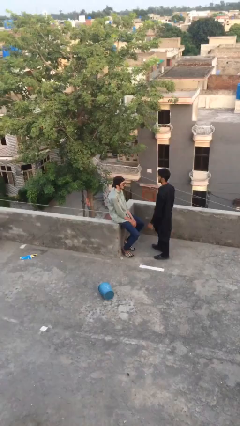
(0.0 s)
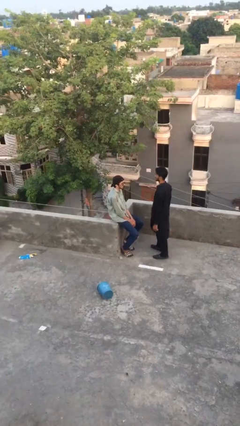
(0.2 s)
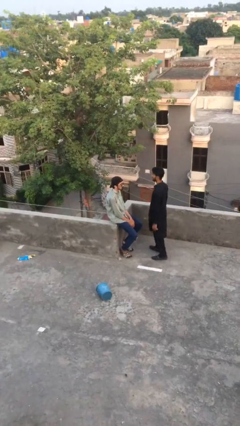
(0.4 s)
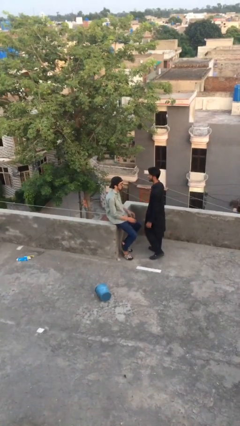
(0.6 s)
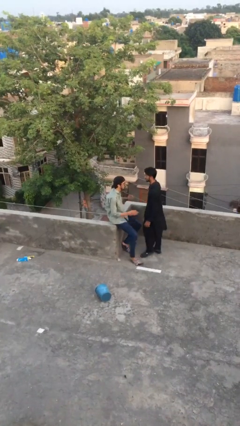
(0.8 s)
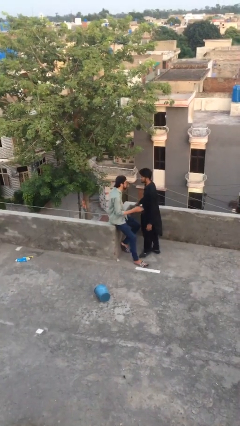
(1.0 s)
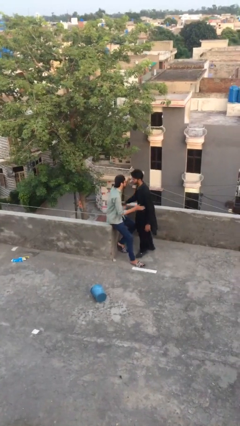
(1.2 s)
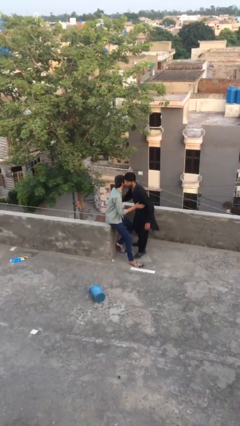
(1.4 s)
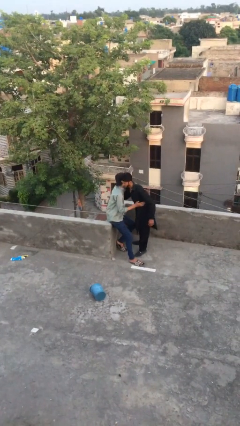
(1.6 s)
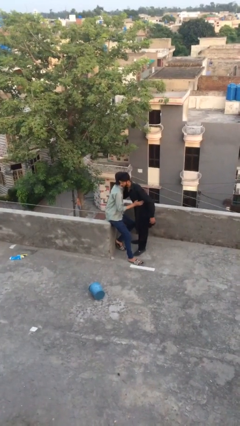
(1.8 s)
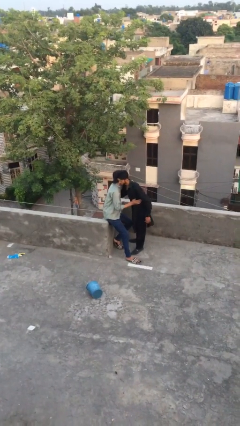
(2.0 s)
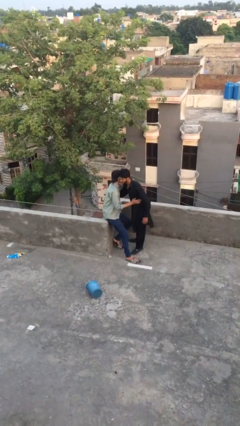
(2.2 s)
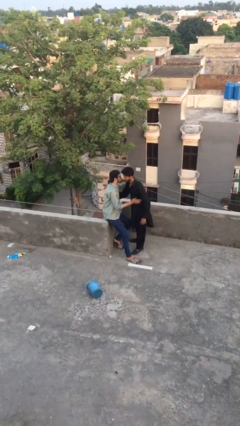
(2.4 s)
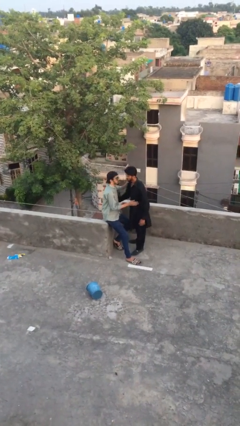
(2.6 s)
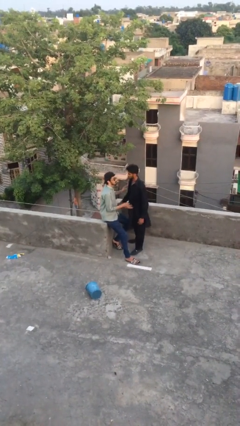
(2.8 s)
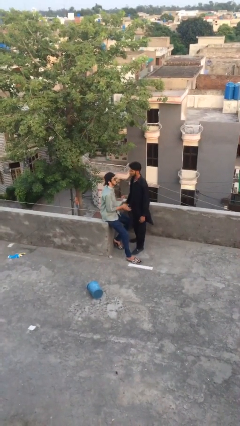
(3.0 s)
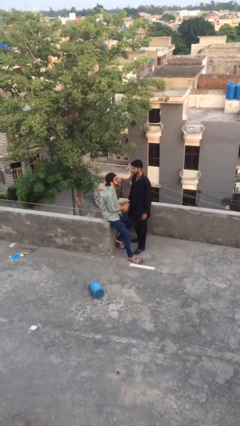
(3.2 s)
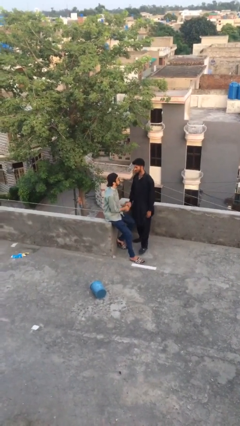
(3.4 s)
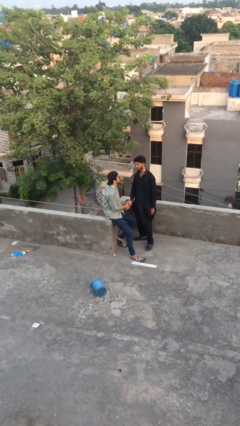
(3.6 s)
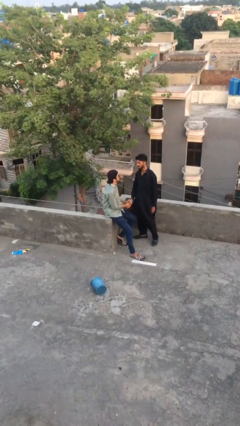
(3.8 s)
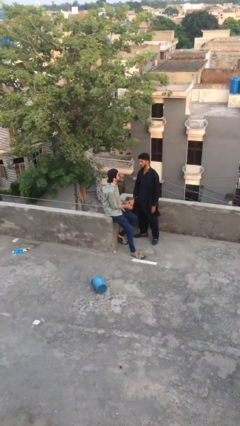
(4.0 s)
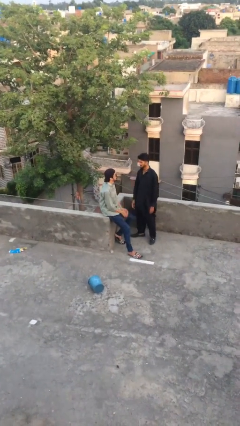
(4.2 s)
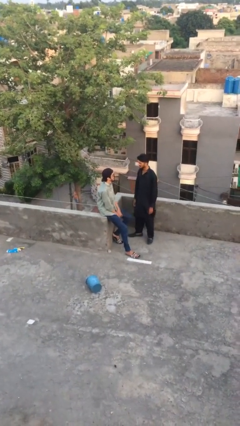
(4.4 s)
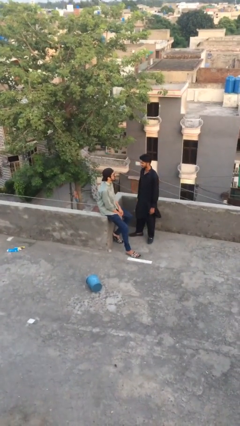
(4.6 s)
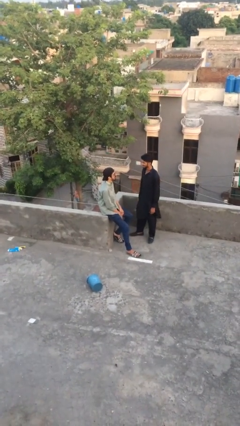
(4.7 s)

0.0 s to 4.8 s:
person embraces person

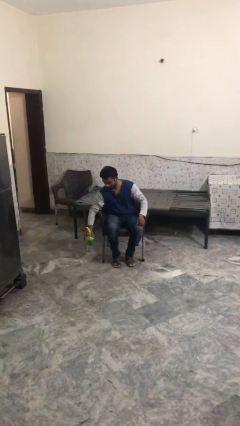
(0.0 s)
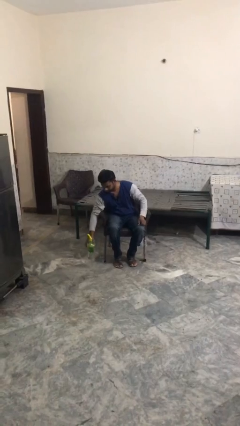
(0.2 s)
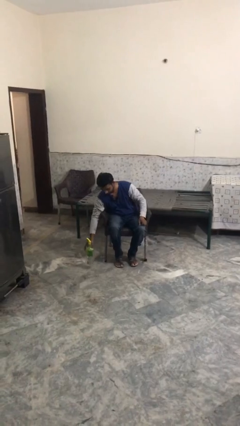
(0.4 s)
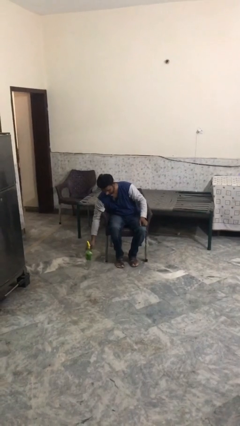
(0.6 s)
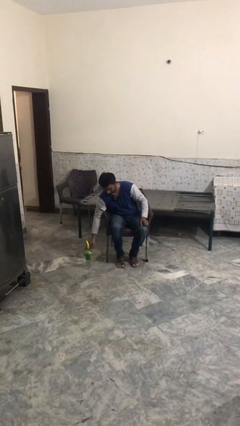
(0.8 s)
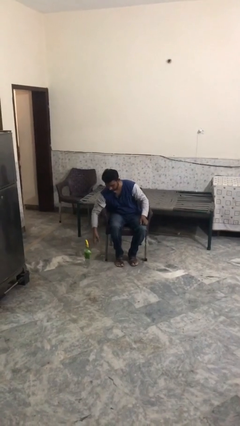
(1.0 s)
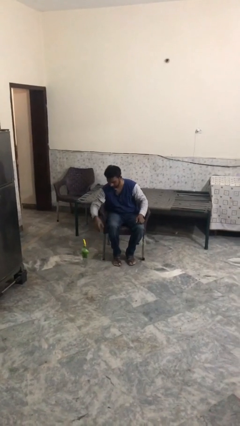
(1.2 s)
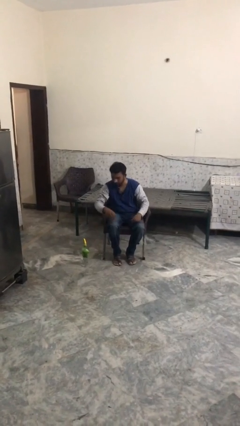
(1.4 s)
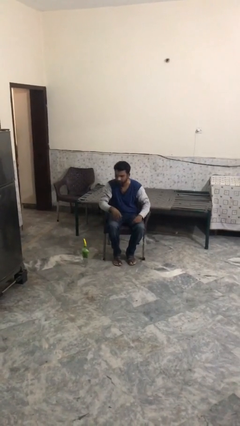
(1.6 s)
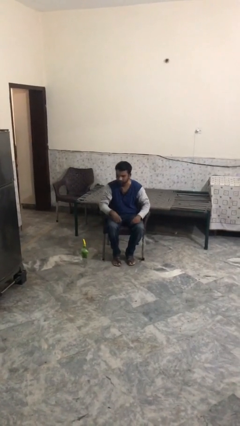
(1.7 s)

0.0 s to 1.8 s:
person puts down object on floor

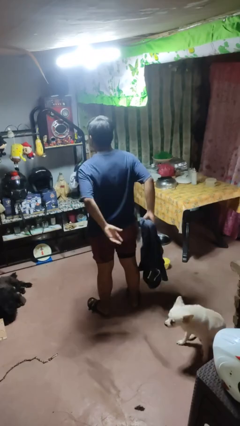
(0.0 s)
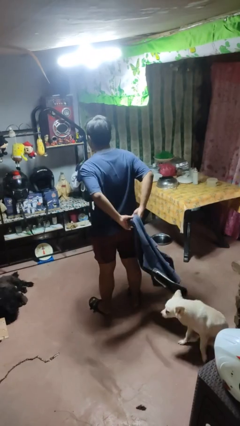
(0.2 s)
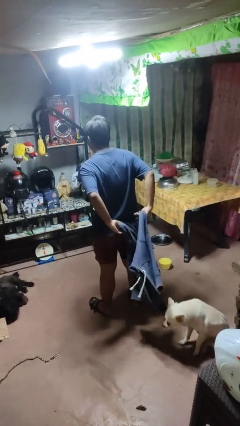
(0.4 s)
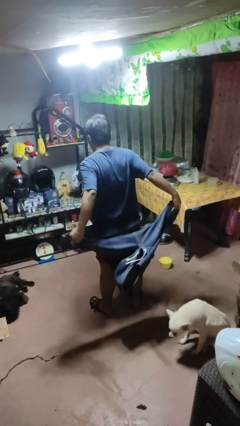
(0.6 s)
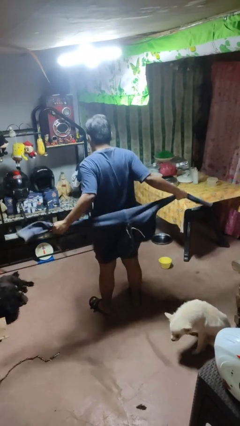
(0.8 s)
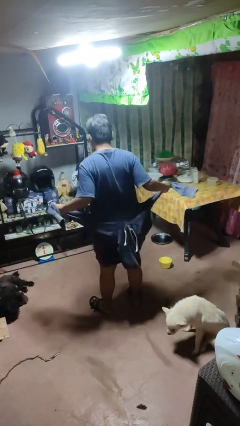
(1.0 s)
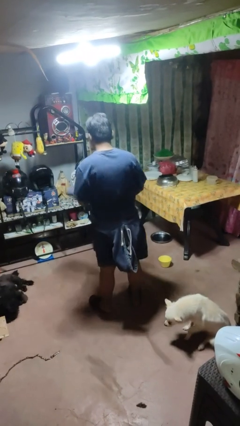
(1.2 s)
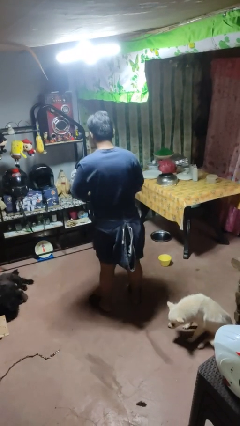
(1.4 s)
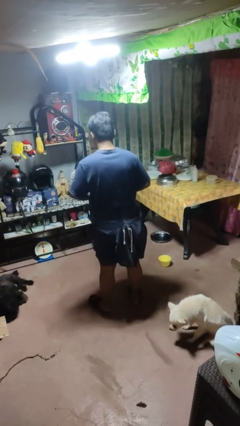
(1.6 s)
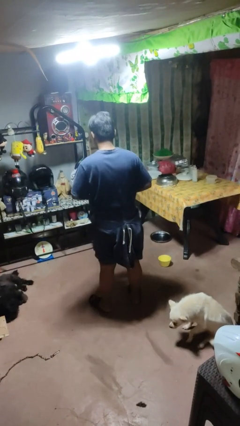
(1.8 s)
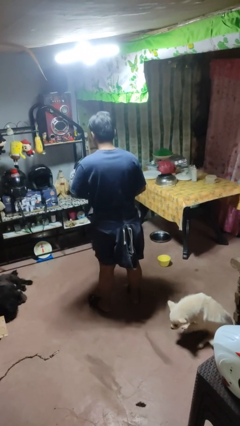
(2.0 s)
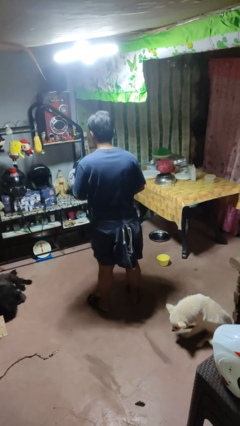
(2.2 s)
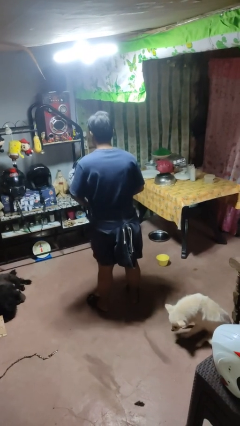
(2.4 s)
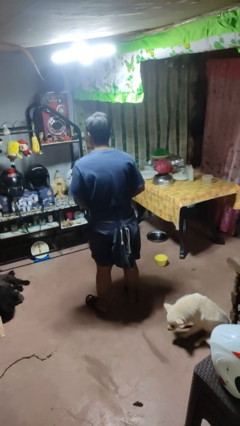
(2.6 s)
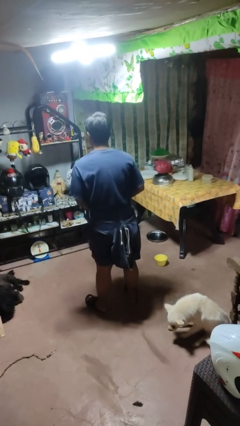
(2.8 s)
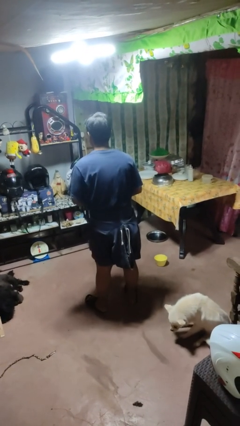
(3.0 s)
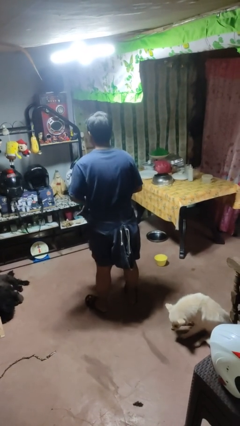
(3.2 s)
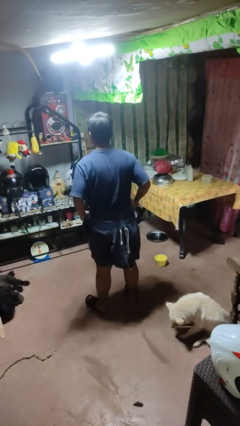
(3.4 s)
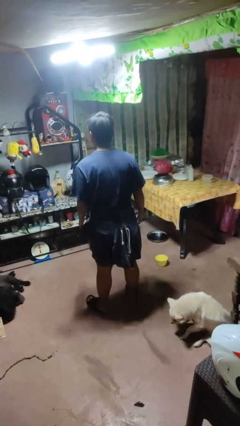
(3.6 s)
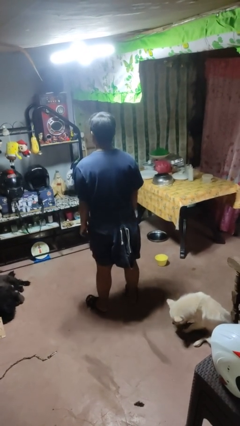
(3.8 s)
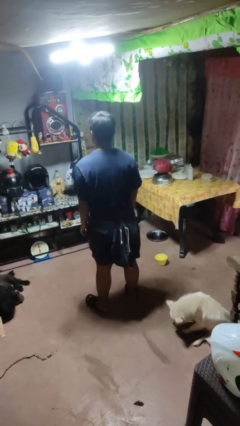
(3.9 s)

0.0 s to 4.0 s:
person ties jacket around waist

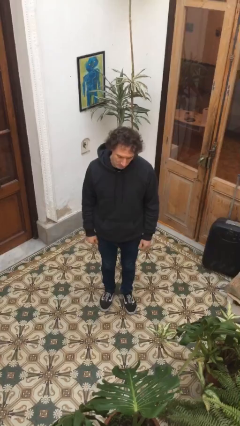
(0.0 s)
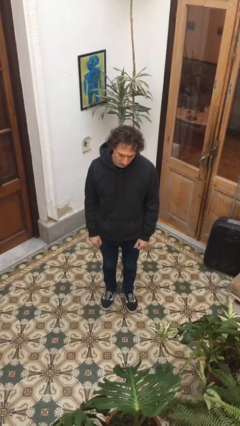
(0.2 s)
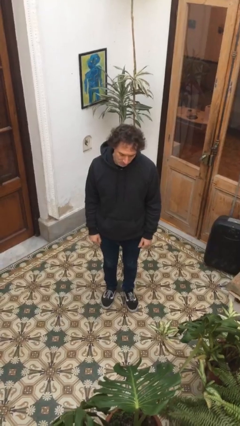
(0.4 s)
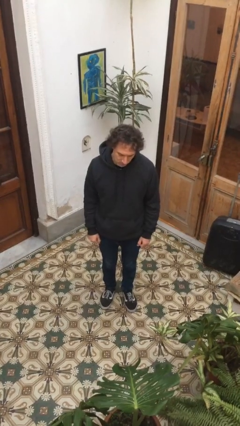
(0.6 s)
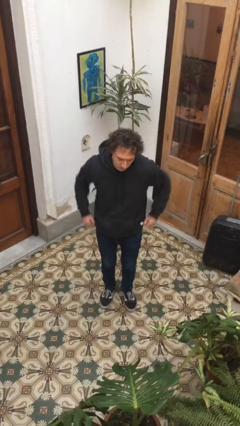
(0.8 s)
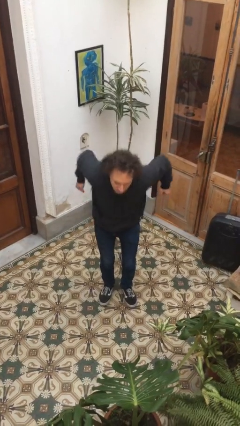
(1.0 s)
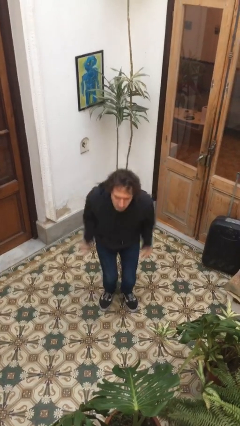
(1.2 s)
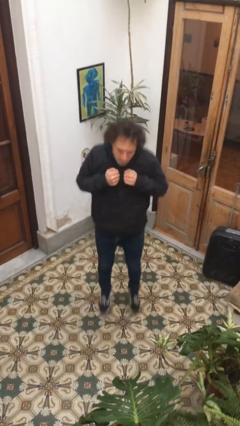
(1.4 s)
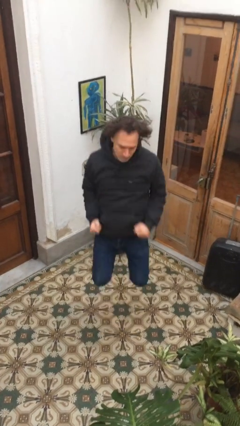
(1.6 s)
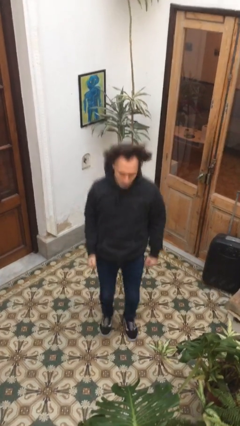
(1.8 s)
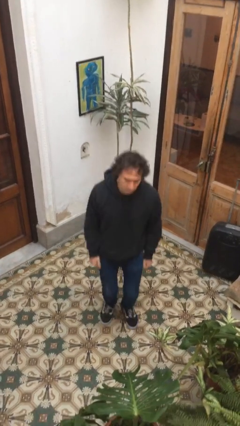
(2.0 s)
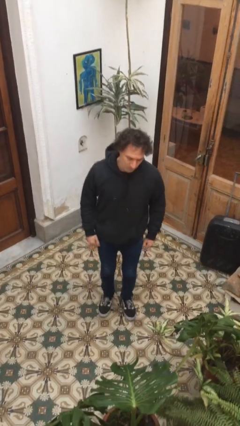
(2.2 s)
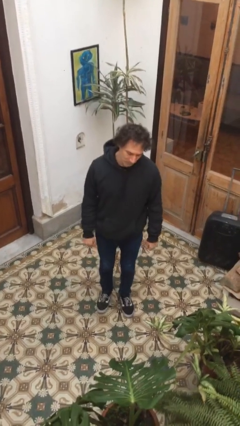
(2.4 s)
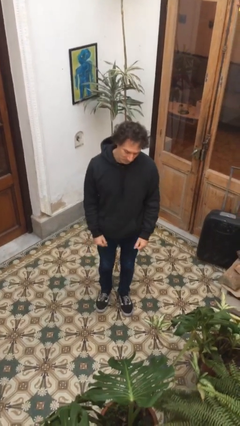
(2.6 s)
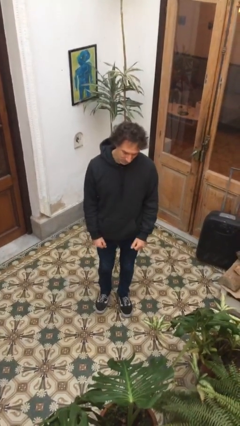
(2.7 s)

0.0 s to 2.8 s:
person jumps

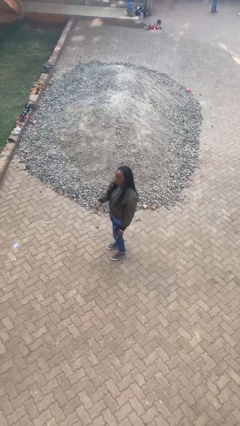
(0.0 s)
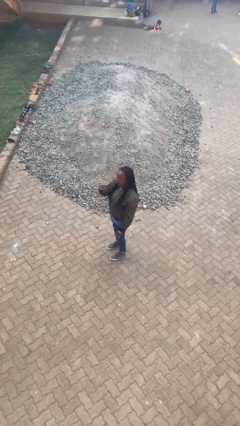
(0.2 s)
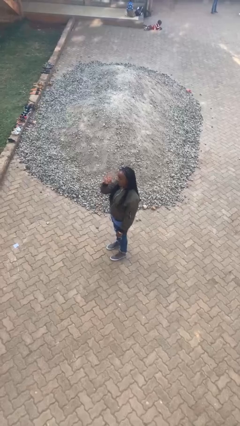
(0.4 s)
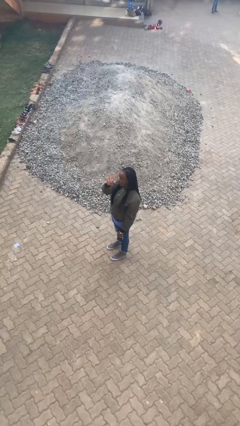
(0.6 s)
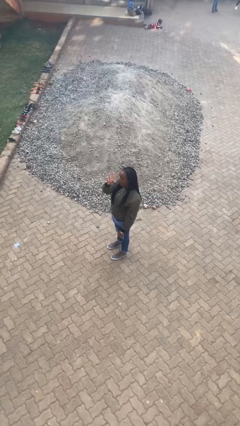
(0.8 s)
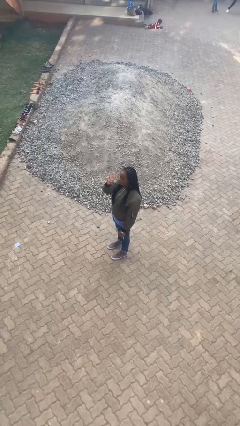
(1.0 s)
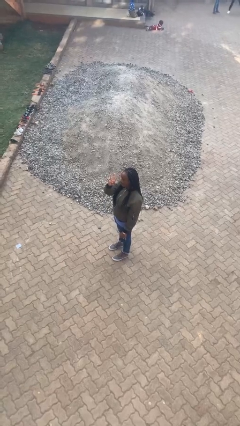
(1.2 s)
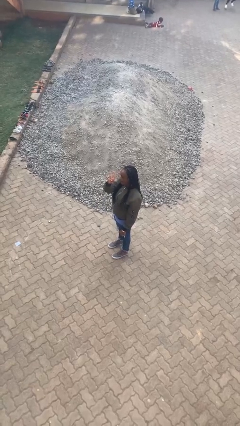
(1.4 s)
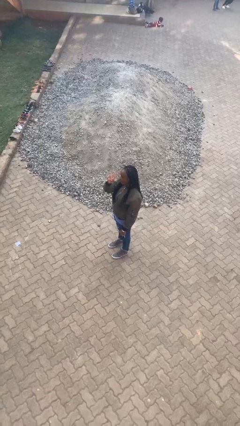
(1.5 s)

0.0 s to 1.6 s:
person gestures number four

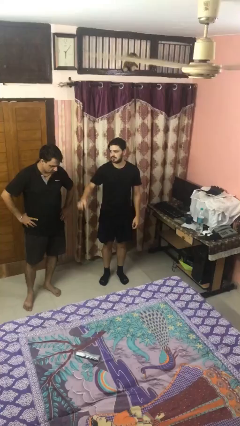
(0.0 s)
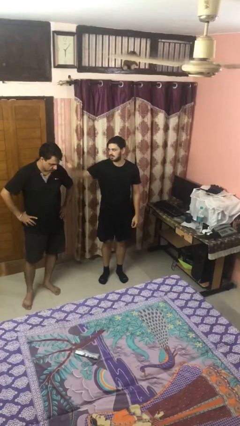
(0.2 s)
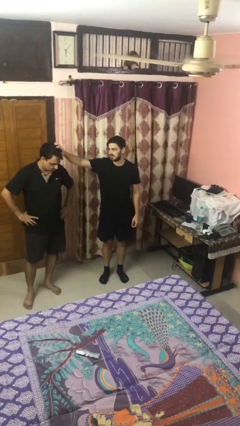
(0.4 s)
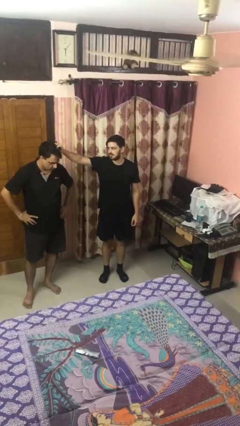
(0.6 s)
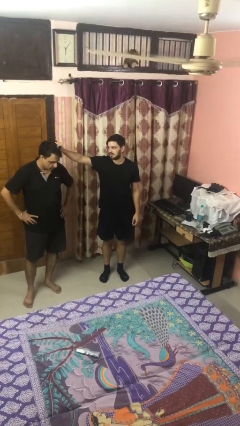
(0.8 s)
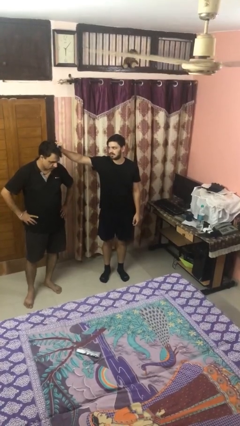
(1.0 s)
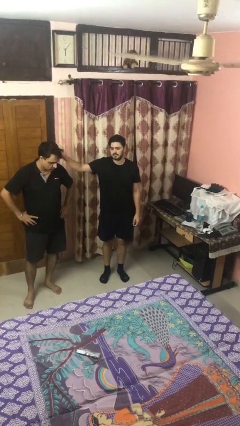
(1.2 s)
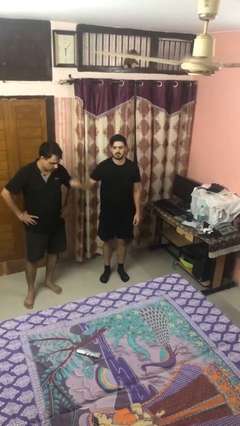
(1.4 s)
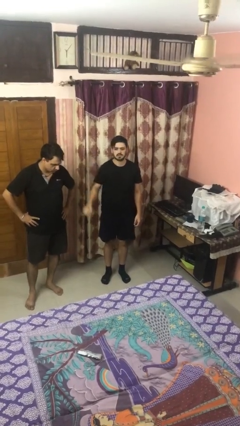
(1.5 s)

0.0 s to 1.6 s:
person grabs person by hair

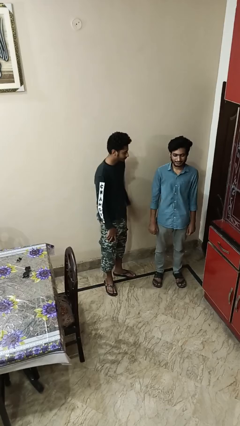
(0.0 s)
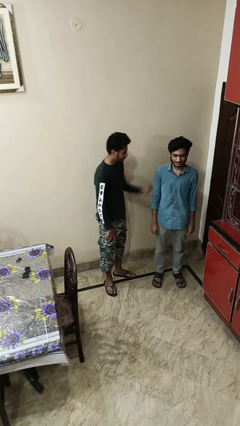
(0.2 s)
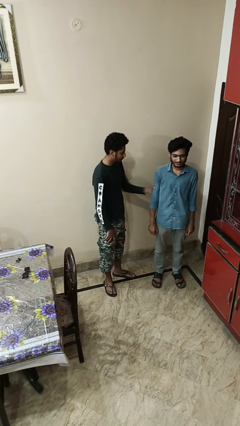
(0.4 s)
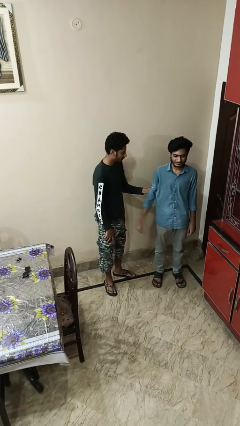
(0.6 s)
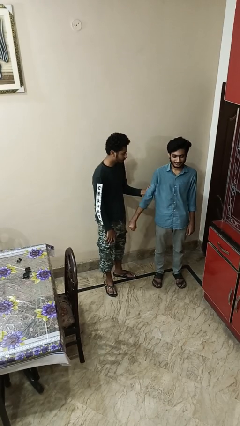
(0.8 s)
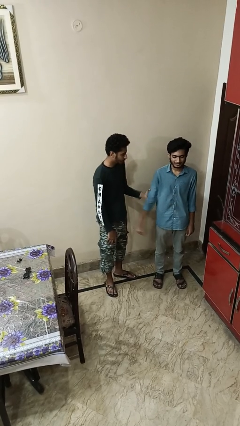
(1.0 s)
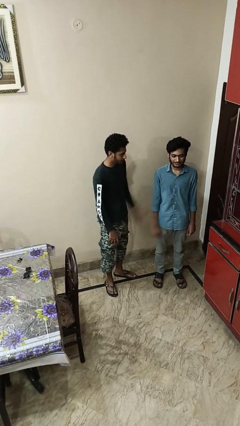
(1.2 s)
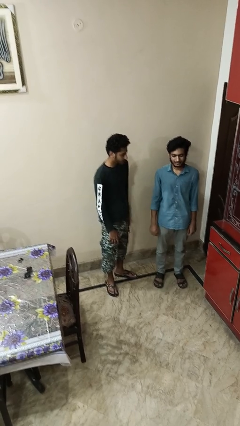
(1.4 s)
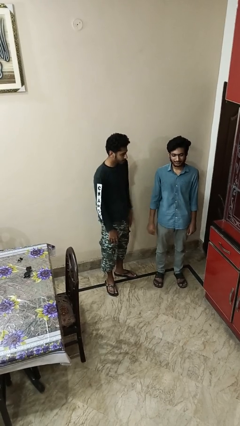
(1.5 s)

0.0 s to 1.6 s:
person grabs person by bicep
